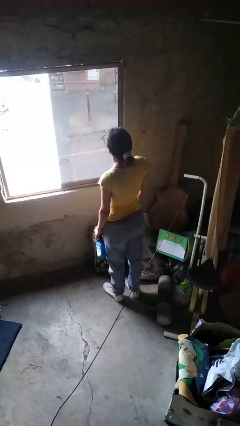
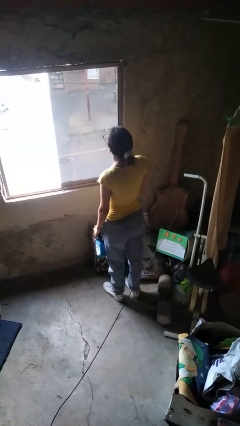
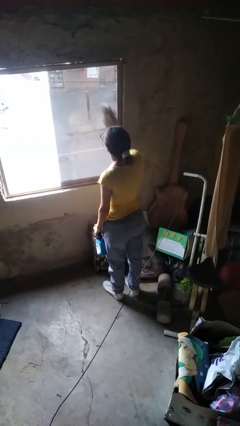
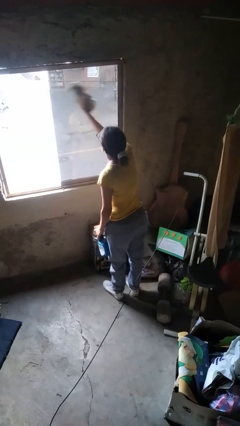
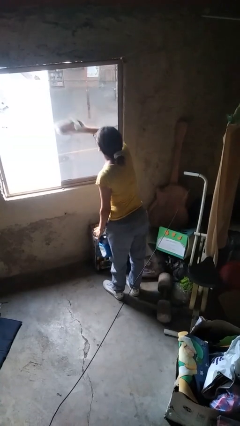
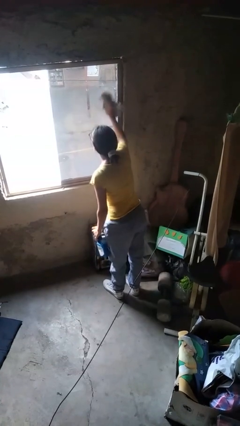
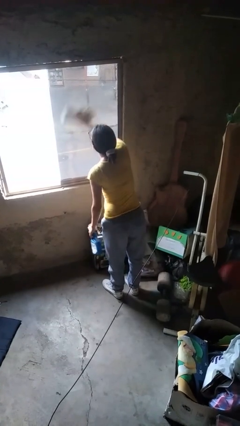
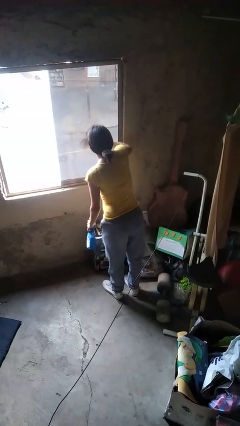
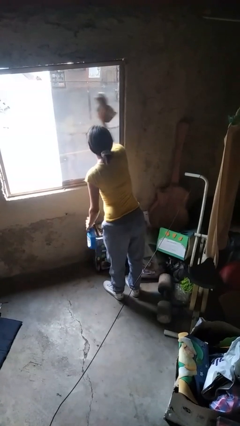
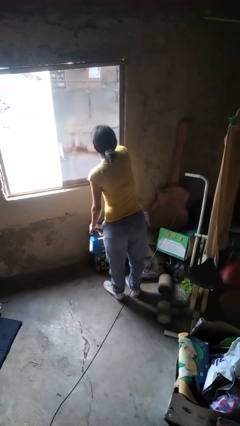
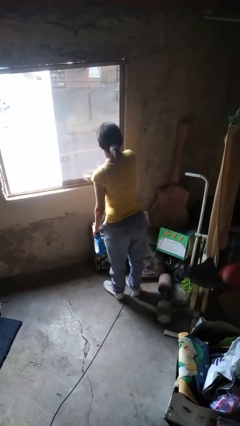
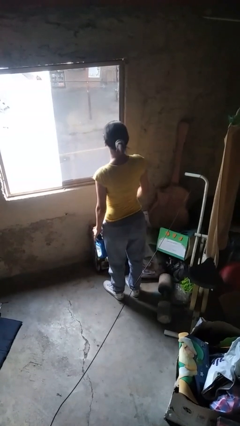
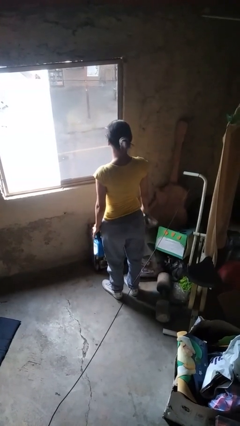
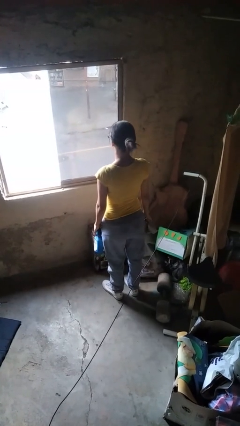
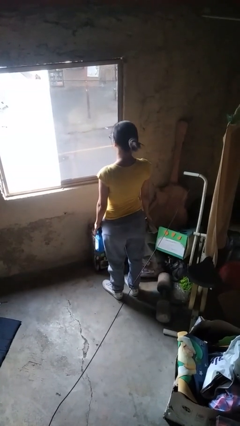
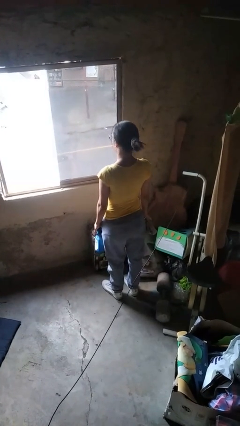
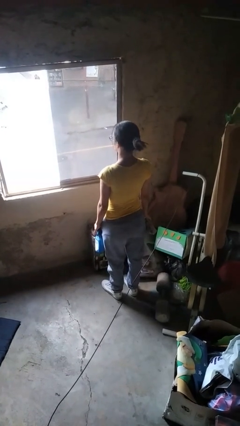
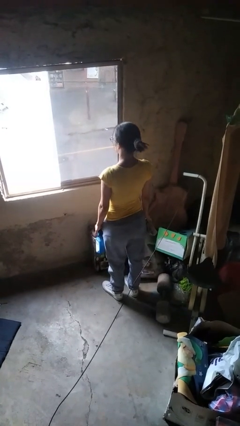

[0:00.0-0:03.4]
person washes window

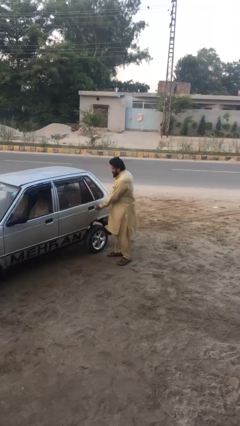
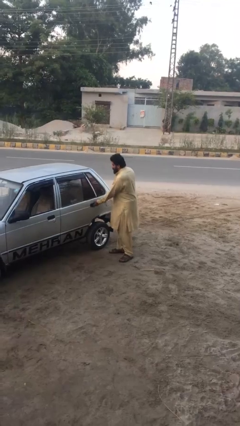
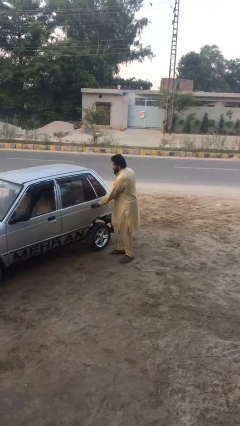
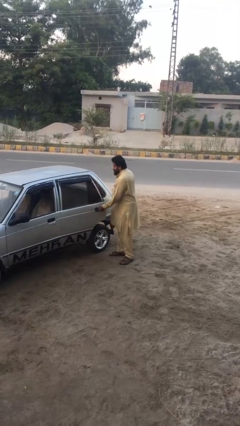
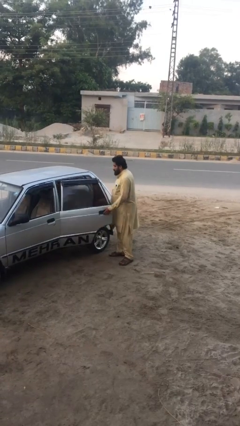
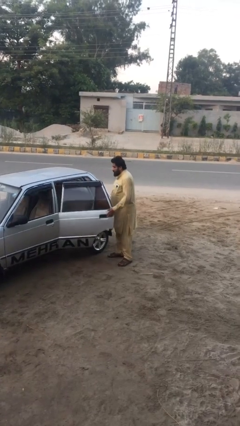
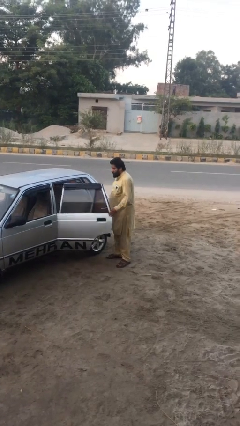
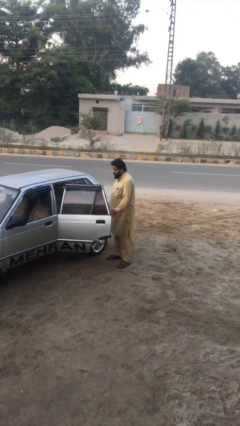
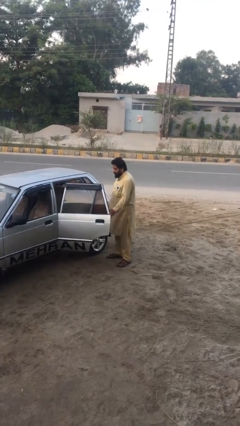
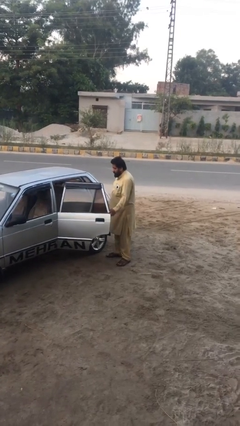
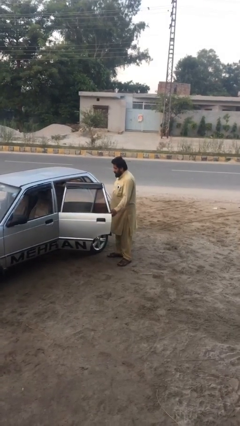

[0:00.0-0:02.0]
person opens car door

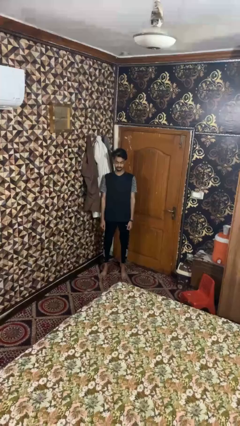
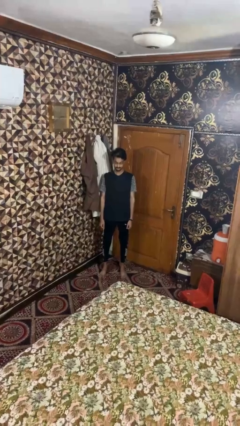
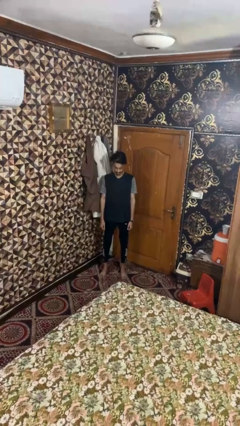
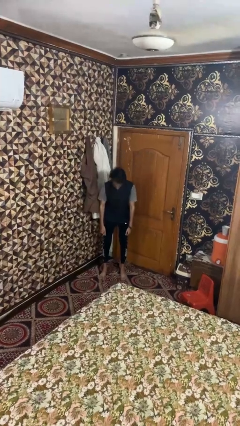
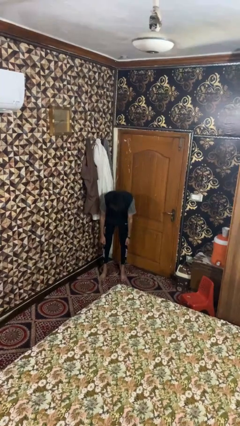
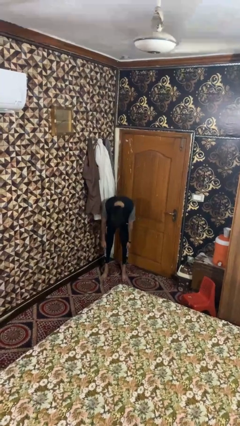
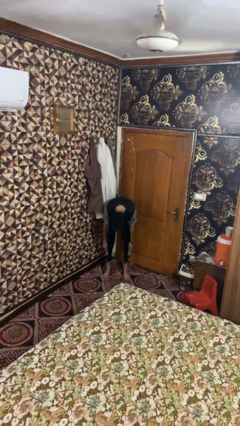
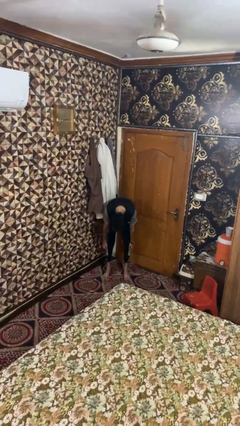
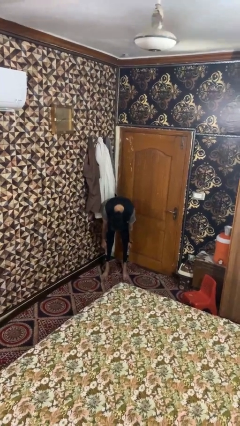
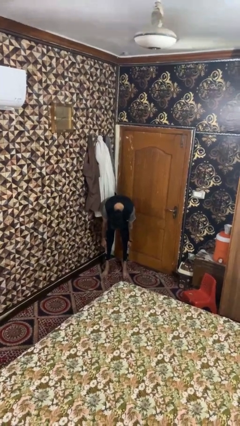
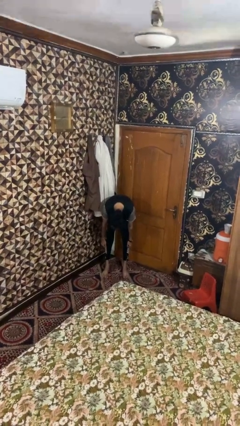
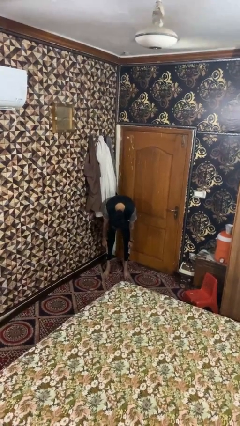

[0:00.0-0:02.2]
person bows

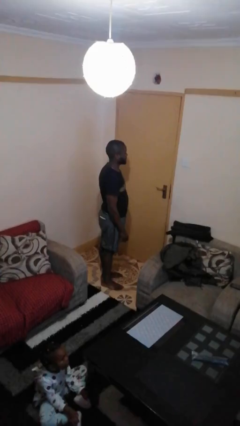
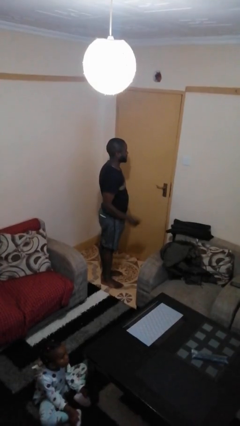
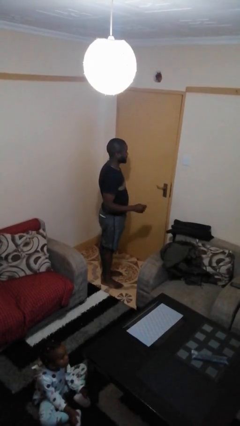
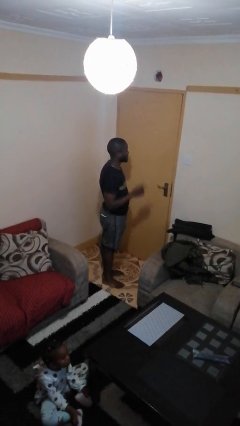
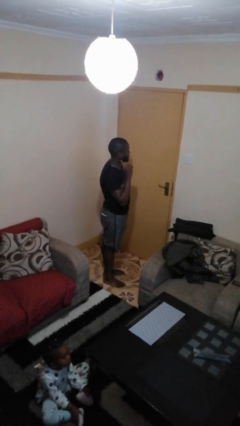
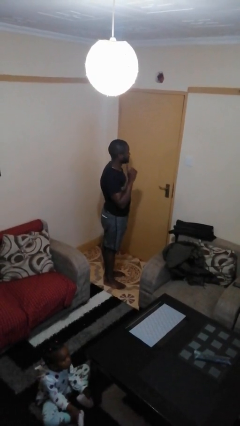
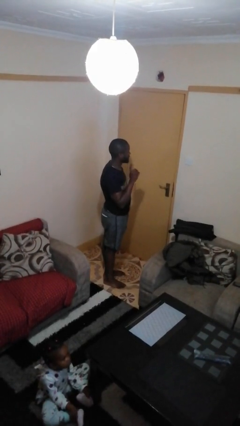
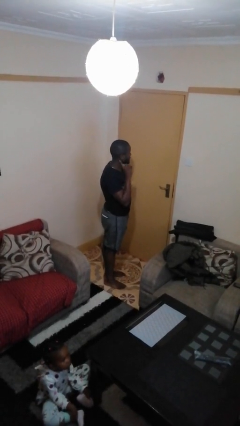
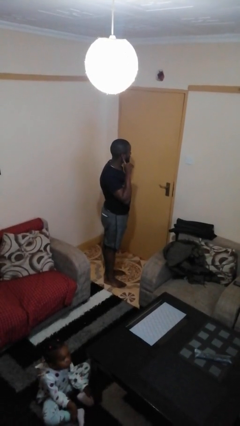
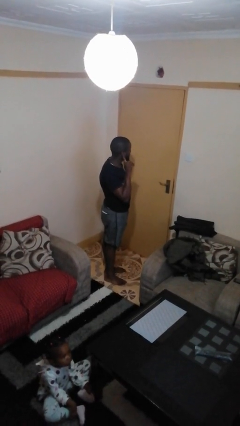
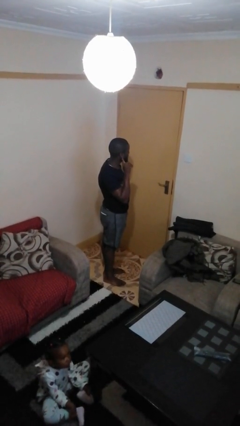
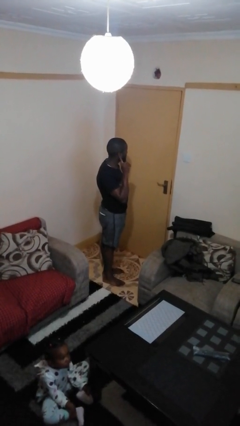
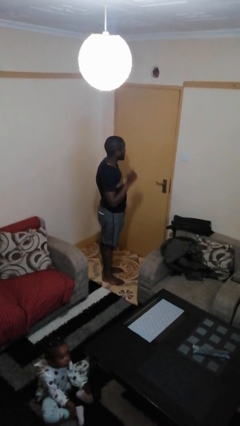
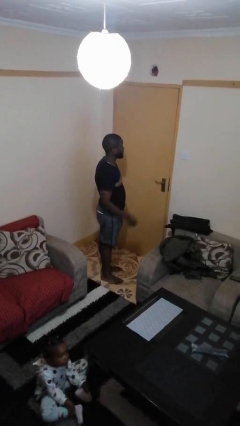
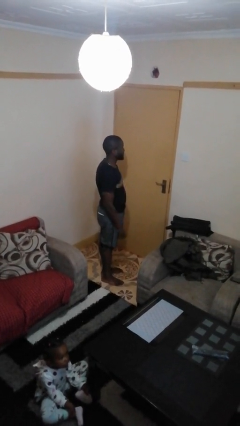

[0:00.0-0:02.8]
person gestures listen closely

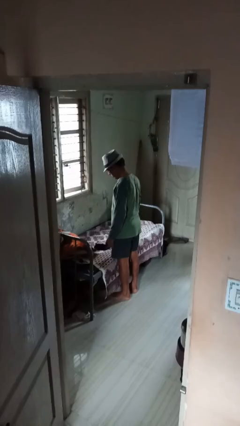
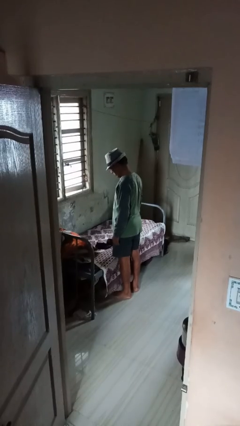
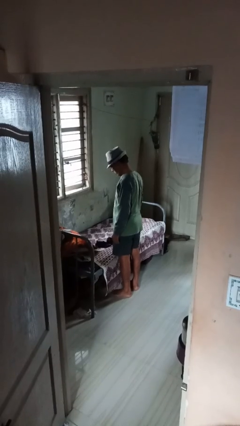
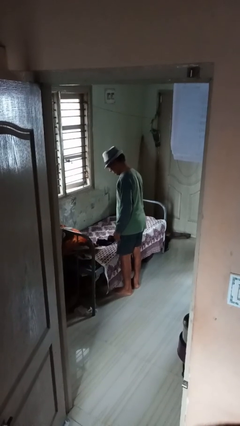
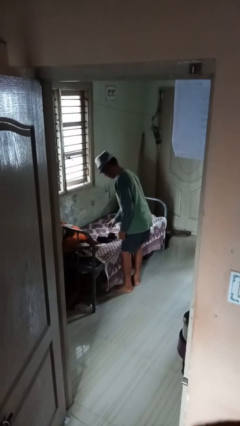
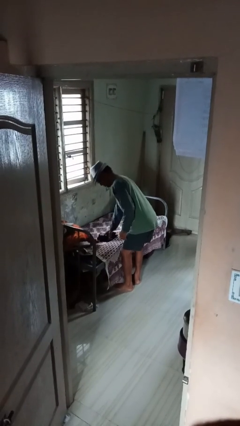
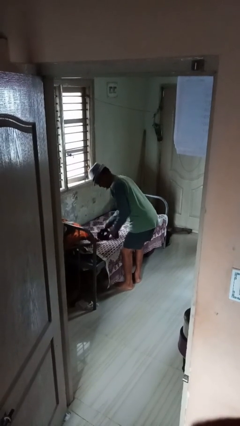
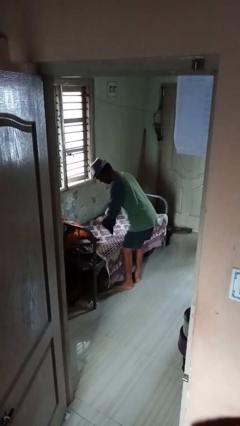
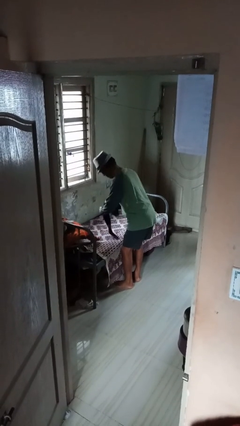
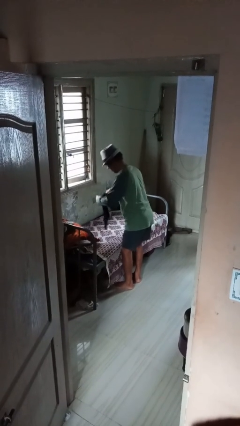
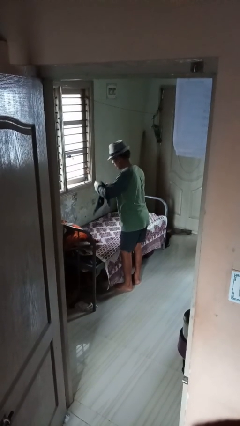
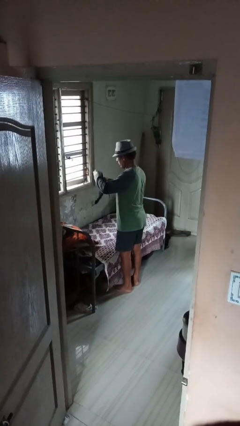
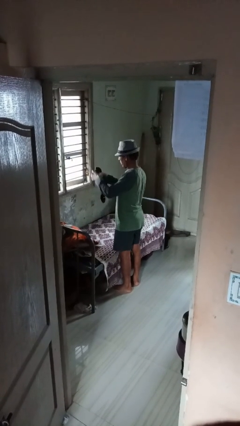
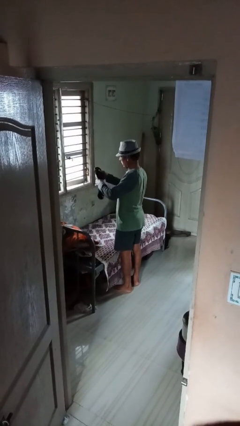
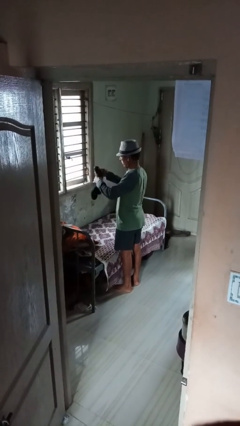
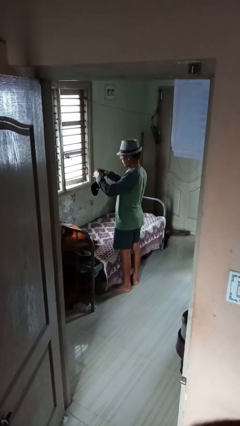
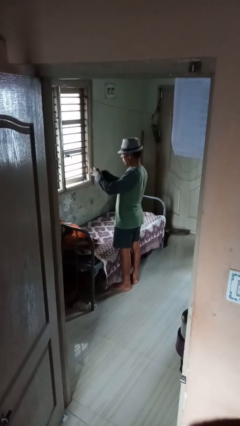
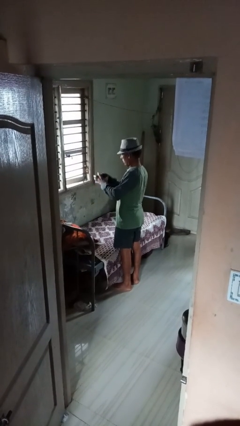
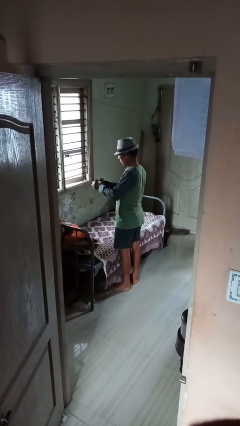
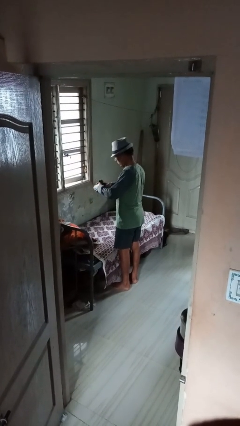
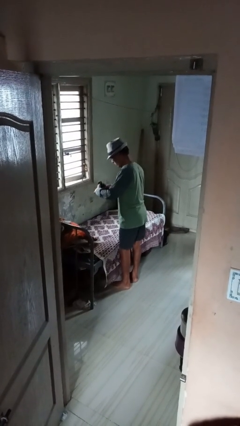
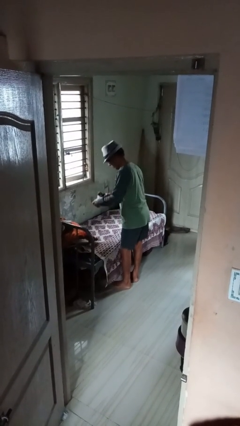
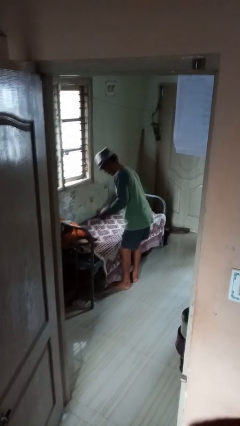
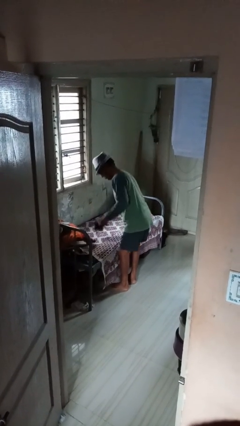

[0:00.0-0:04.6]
person folds socks

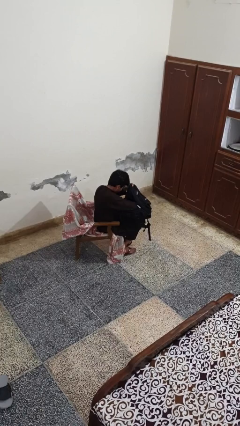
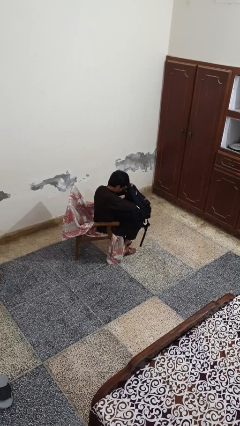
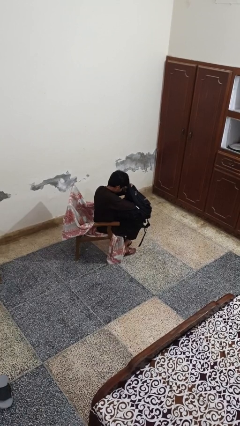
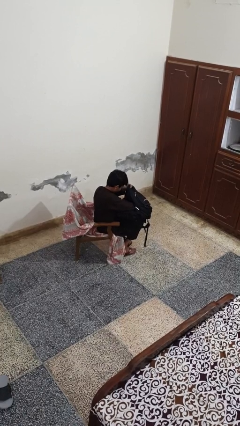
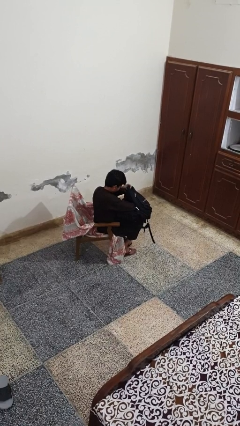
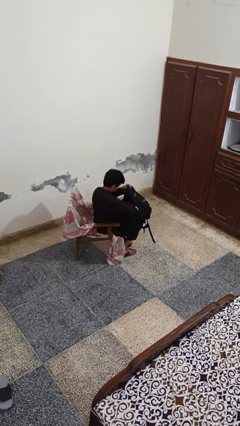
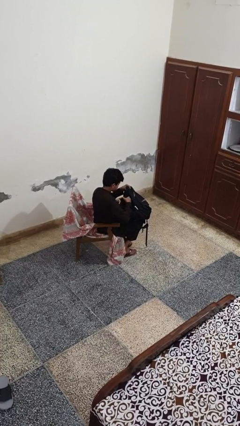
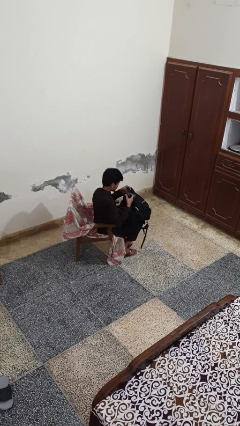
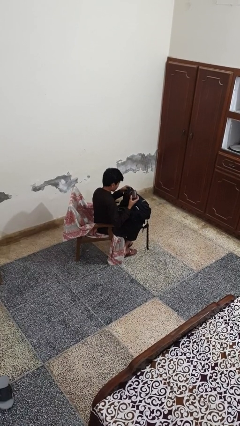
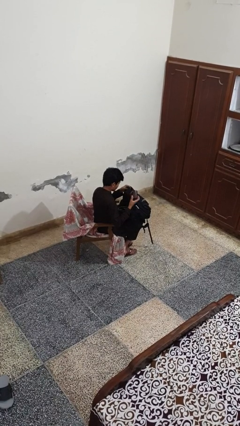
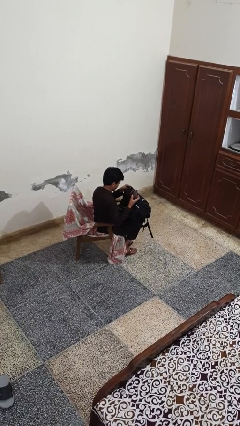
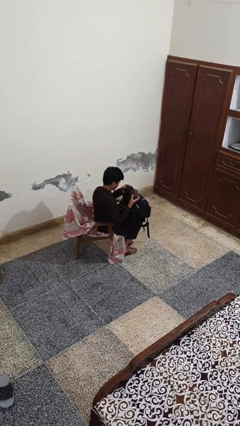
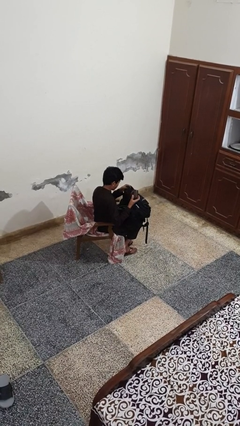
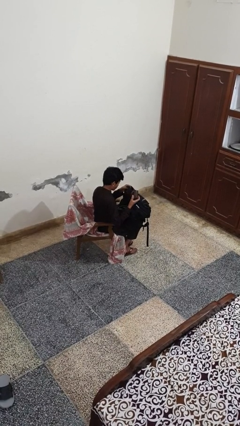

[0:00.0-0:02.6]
person takes object from backpack
